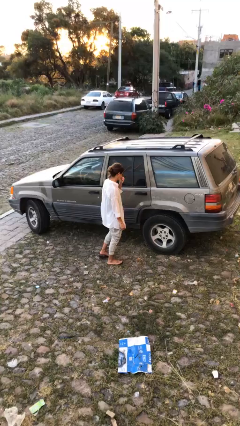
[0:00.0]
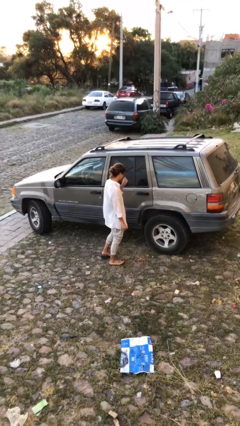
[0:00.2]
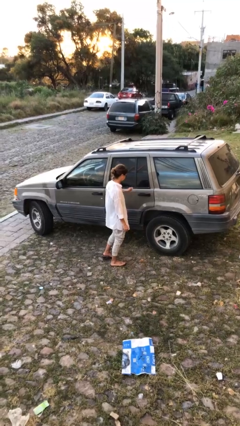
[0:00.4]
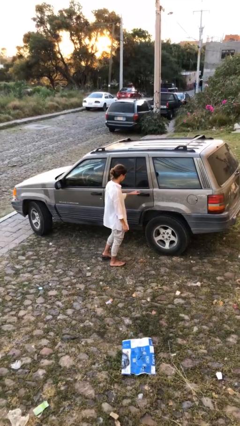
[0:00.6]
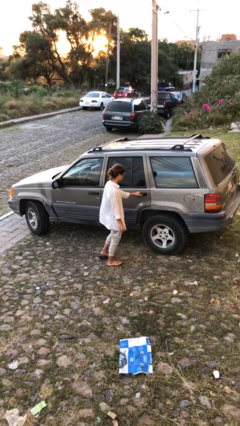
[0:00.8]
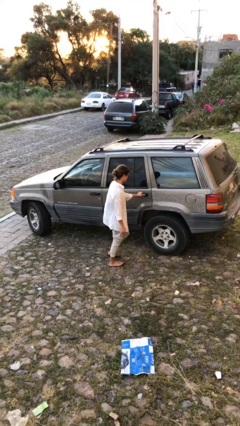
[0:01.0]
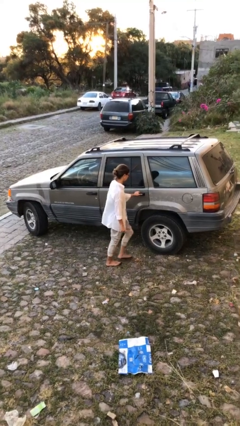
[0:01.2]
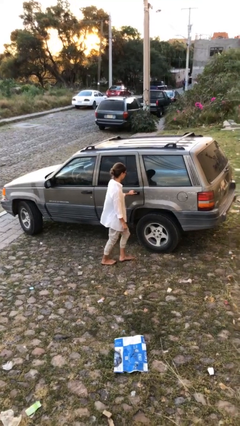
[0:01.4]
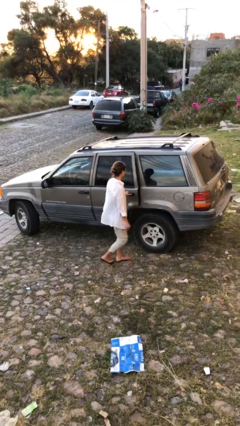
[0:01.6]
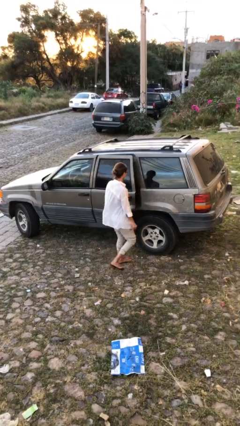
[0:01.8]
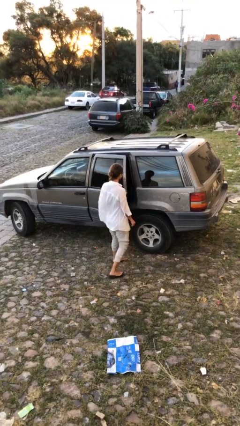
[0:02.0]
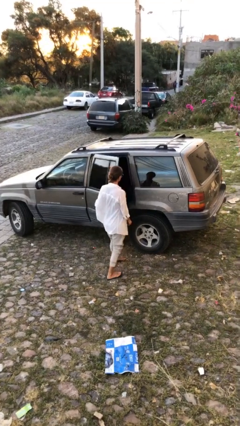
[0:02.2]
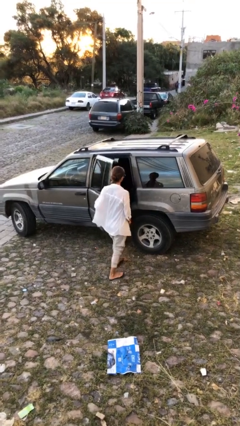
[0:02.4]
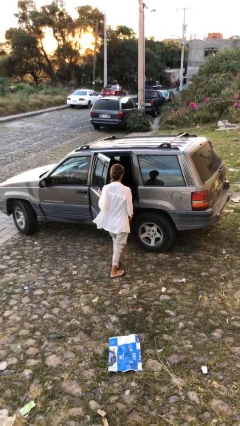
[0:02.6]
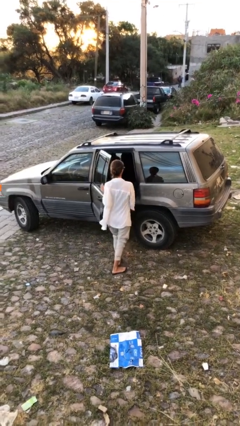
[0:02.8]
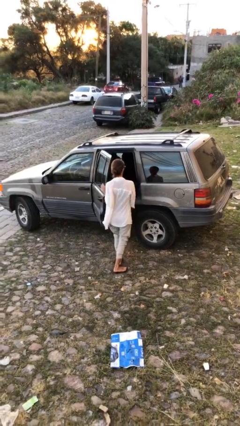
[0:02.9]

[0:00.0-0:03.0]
person opens car door

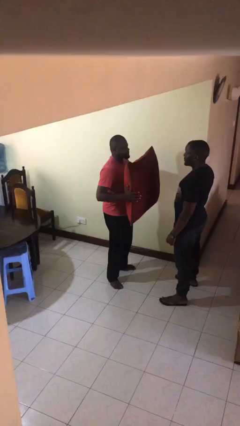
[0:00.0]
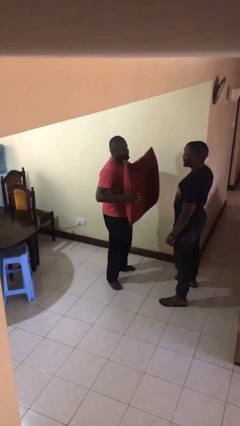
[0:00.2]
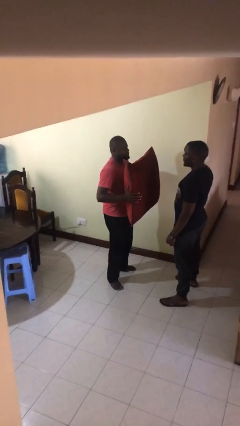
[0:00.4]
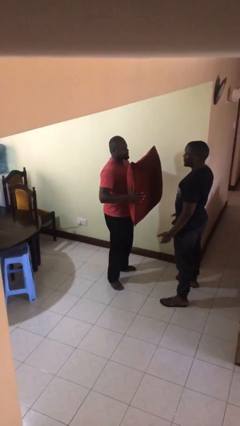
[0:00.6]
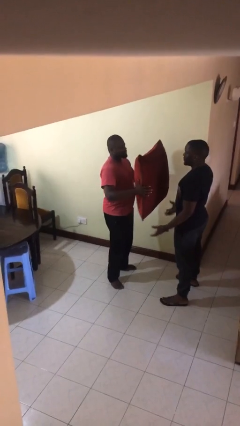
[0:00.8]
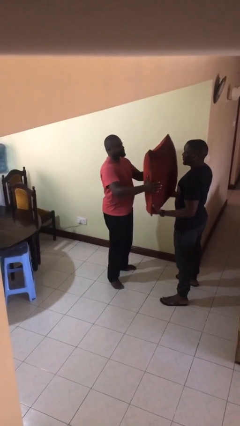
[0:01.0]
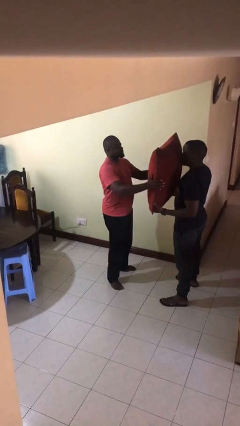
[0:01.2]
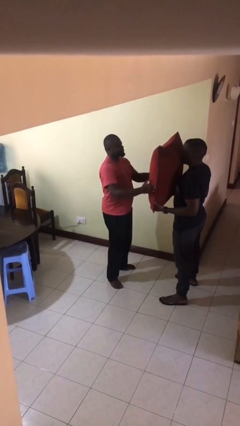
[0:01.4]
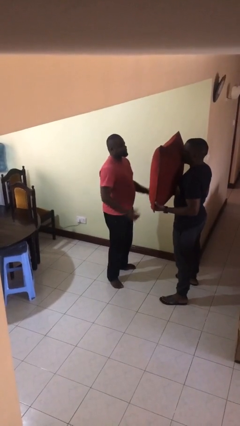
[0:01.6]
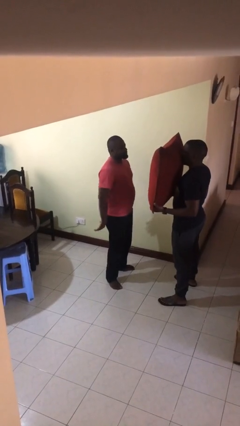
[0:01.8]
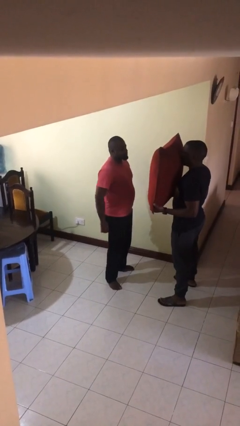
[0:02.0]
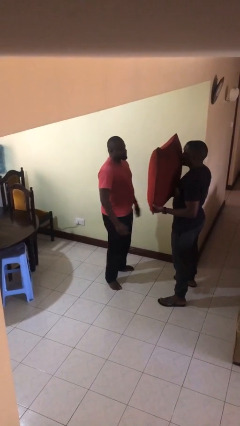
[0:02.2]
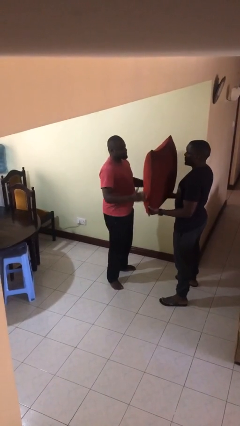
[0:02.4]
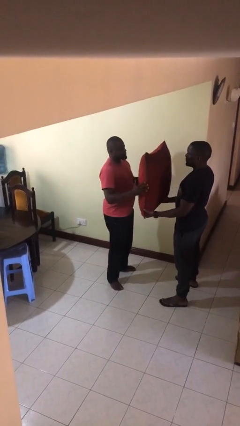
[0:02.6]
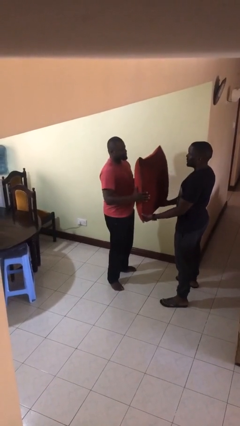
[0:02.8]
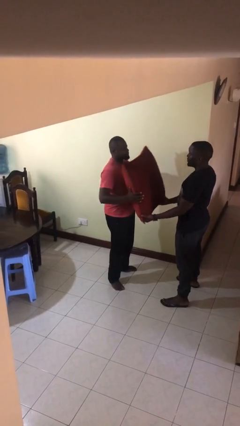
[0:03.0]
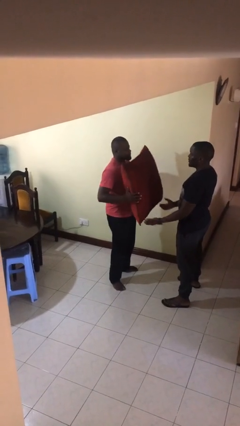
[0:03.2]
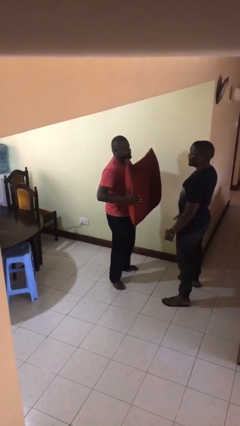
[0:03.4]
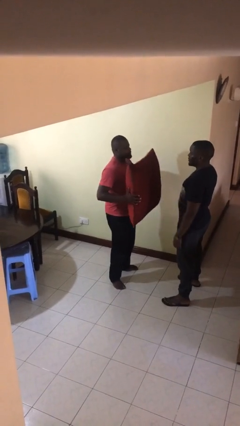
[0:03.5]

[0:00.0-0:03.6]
person transfers object to person

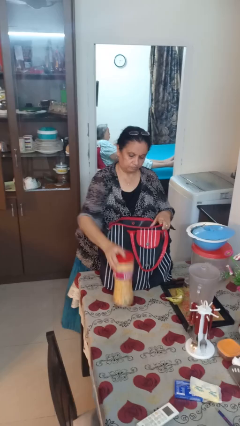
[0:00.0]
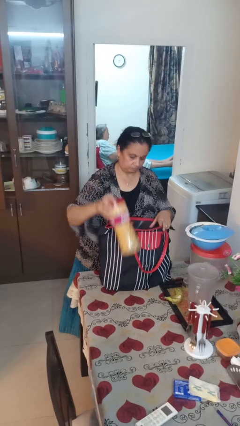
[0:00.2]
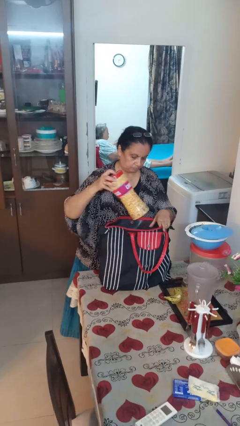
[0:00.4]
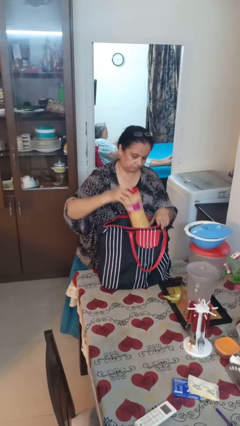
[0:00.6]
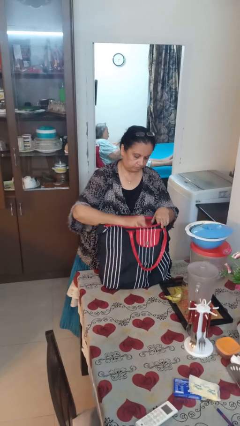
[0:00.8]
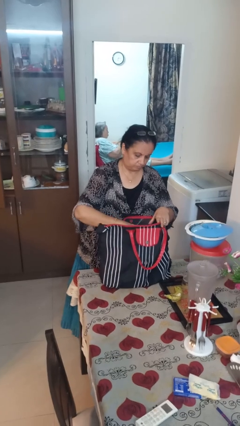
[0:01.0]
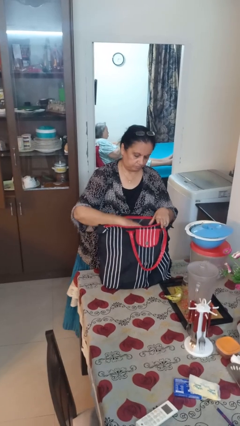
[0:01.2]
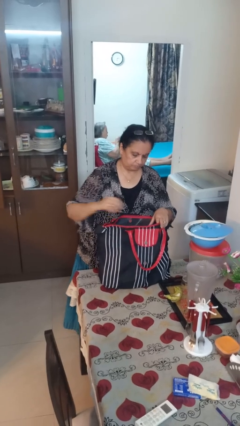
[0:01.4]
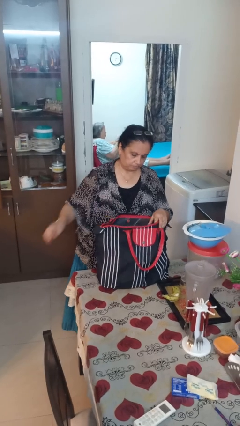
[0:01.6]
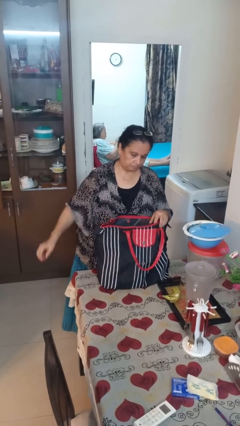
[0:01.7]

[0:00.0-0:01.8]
person puts object into bag

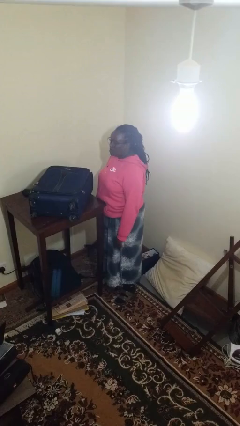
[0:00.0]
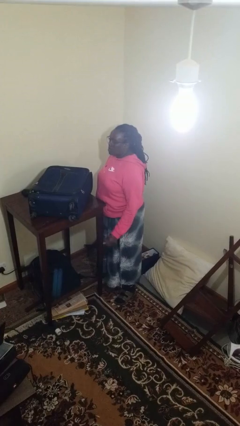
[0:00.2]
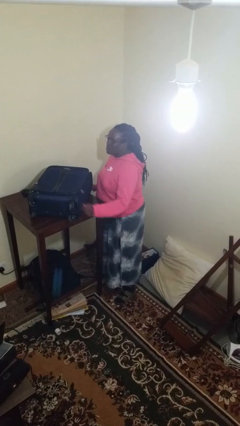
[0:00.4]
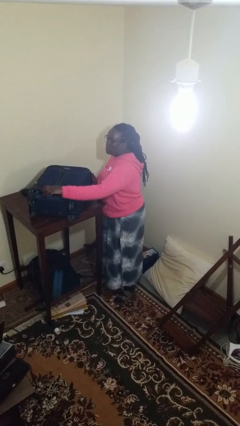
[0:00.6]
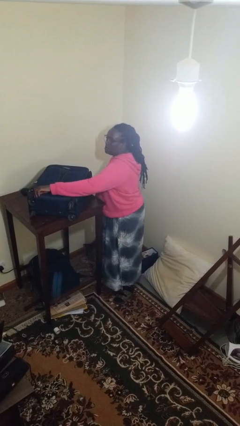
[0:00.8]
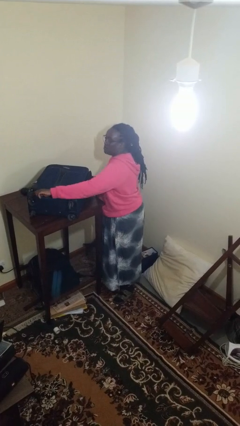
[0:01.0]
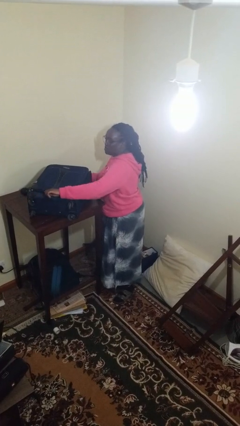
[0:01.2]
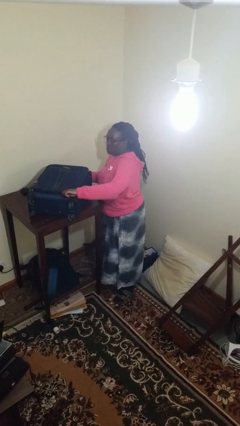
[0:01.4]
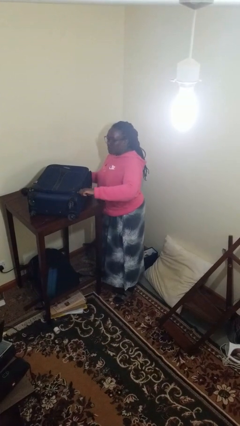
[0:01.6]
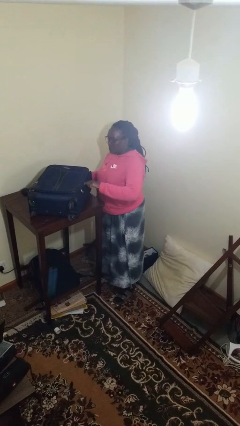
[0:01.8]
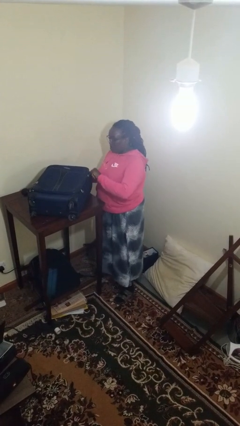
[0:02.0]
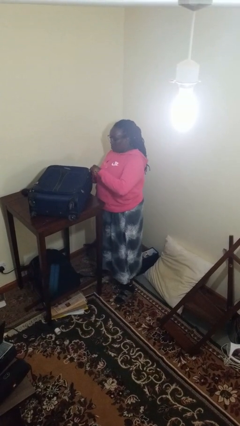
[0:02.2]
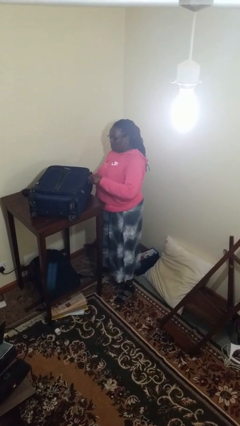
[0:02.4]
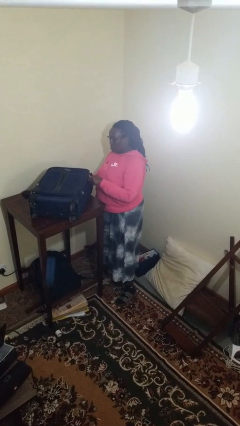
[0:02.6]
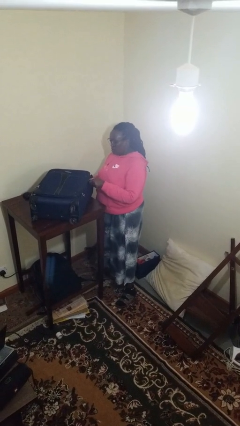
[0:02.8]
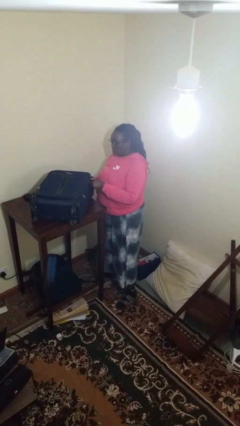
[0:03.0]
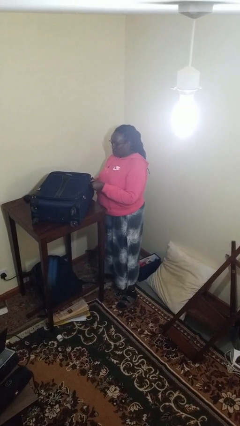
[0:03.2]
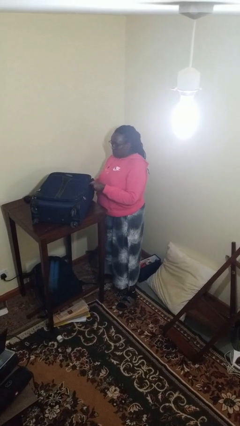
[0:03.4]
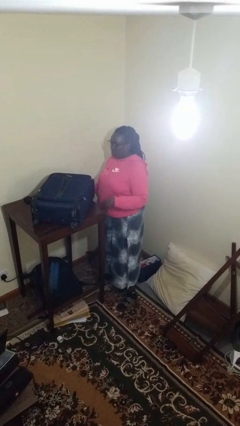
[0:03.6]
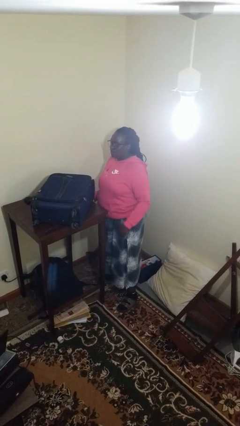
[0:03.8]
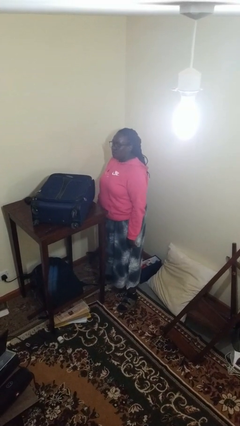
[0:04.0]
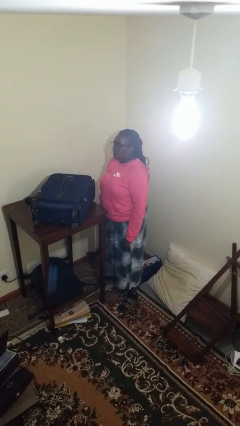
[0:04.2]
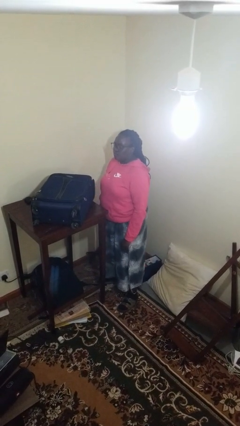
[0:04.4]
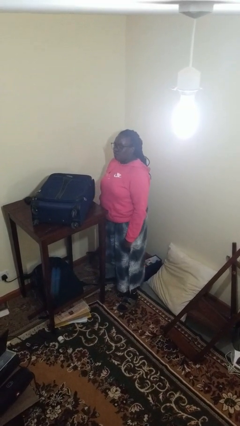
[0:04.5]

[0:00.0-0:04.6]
person opens suitcase

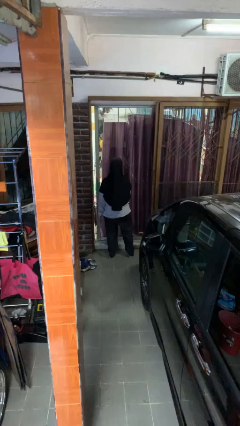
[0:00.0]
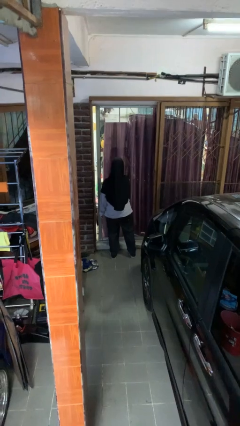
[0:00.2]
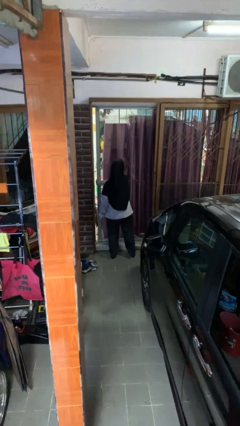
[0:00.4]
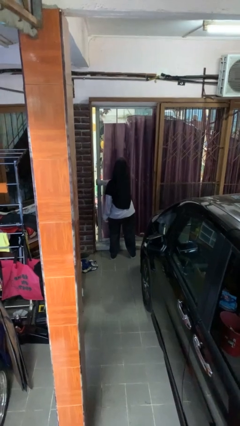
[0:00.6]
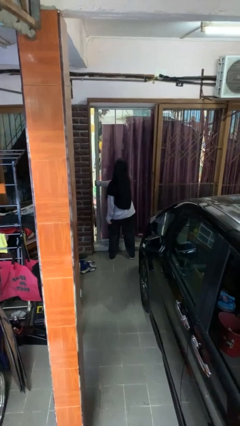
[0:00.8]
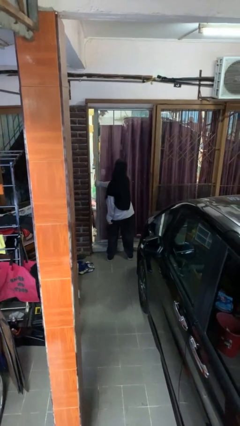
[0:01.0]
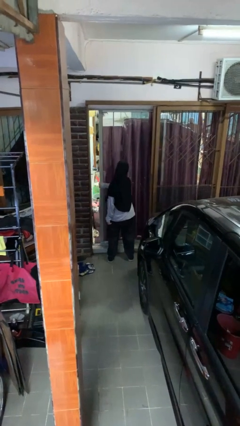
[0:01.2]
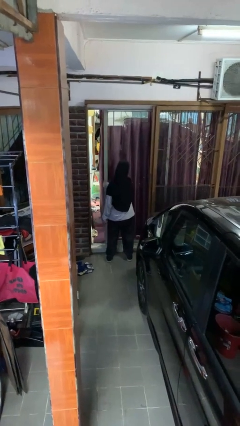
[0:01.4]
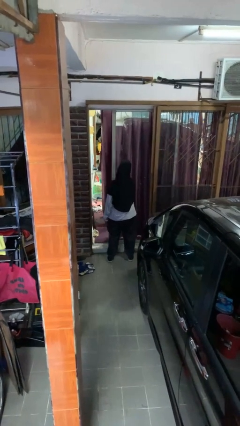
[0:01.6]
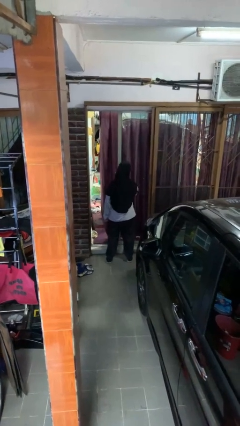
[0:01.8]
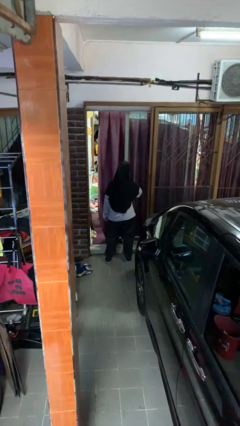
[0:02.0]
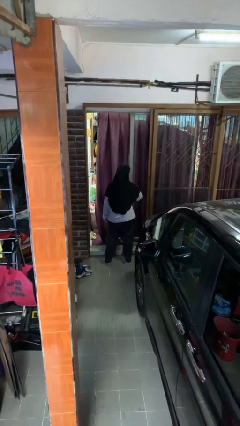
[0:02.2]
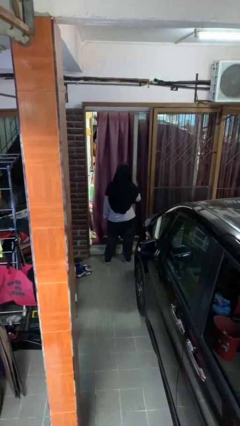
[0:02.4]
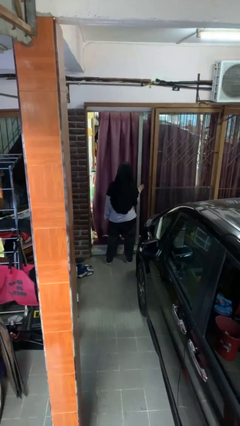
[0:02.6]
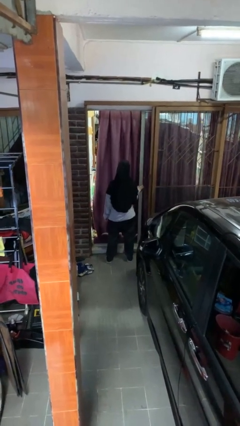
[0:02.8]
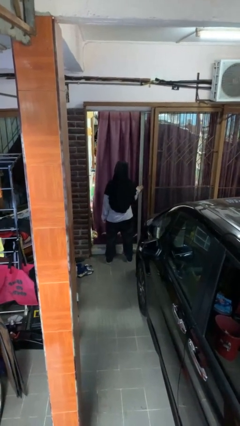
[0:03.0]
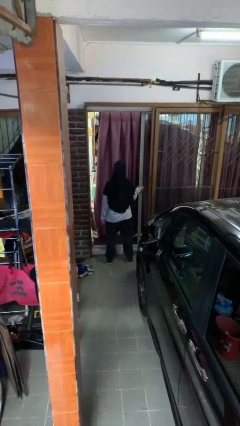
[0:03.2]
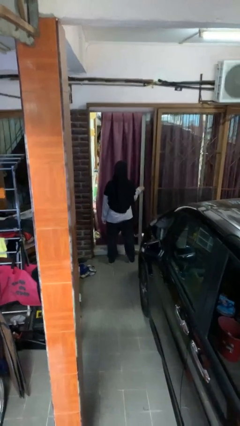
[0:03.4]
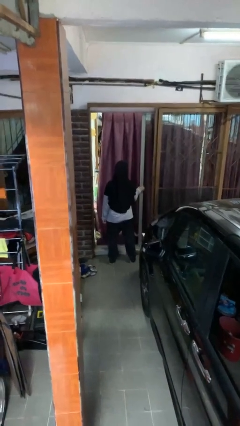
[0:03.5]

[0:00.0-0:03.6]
person opens sliding door

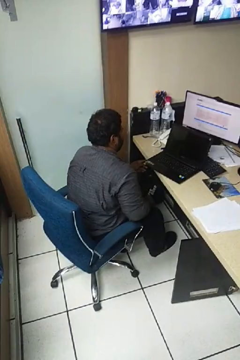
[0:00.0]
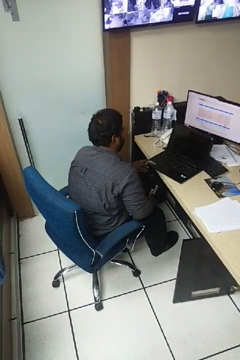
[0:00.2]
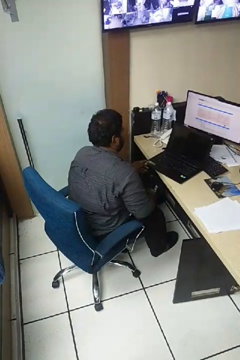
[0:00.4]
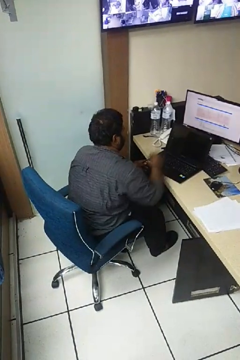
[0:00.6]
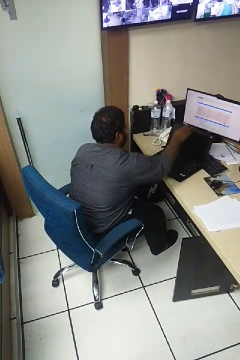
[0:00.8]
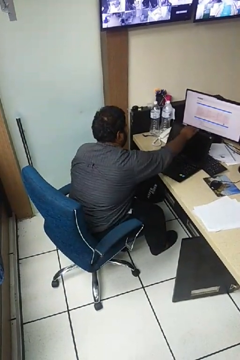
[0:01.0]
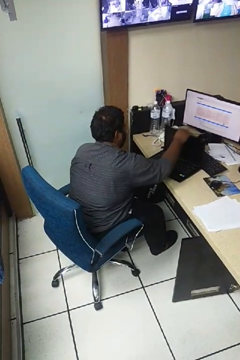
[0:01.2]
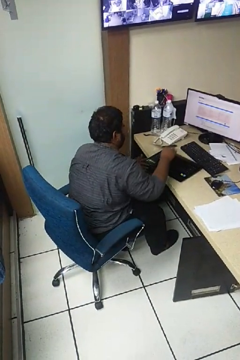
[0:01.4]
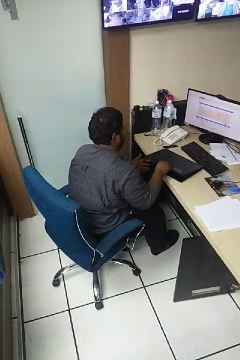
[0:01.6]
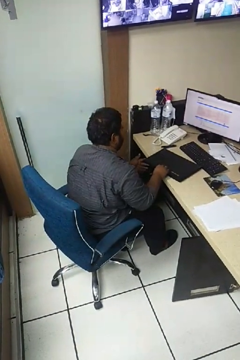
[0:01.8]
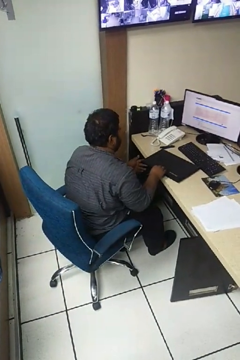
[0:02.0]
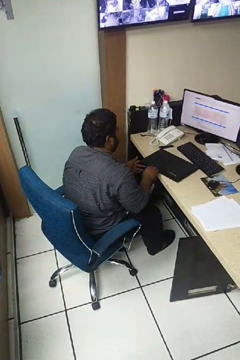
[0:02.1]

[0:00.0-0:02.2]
person closes laptop
